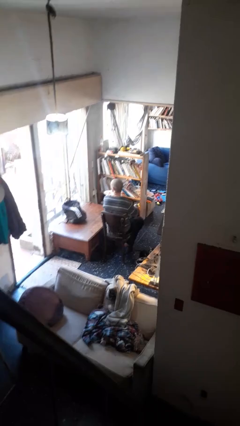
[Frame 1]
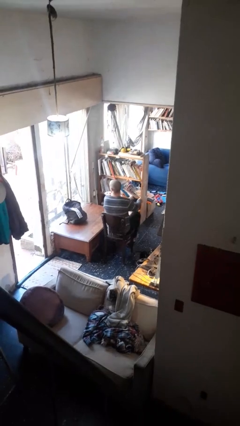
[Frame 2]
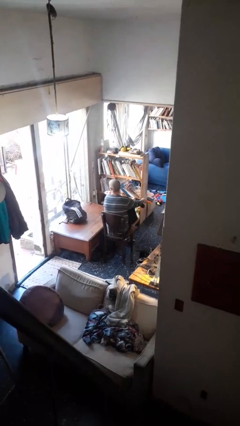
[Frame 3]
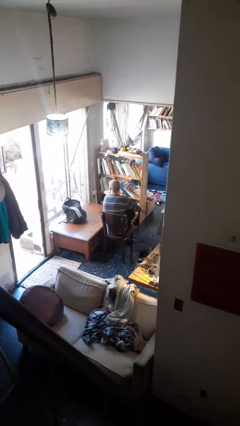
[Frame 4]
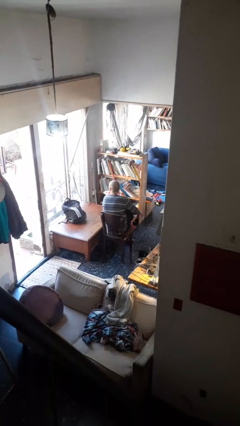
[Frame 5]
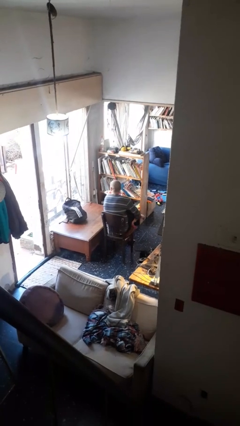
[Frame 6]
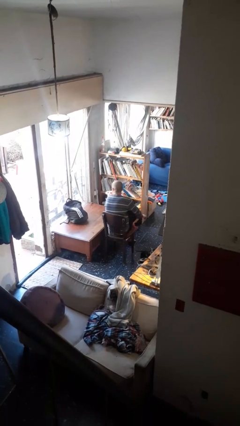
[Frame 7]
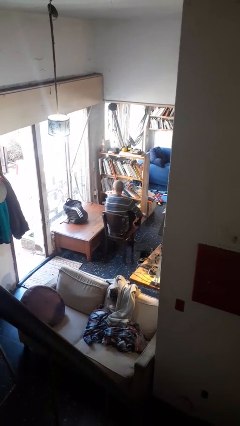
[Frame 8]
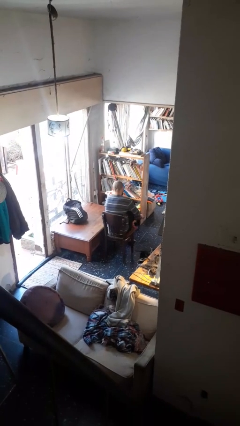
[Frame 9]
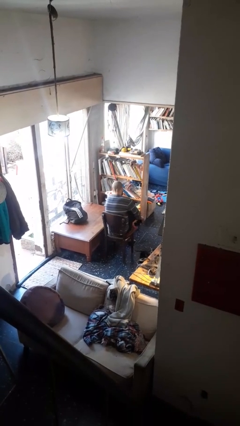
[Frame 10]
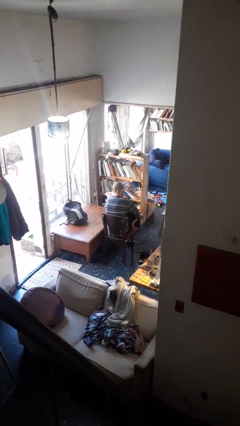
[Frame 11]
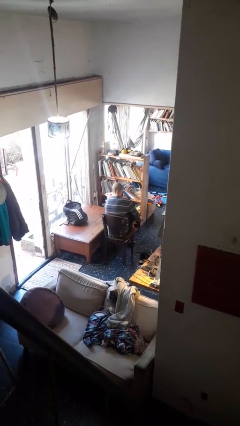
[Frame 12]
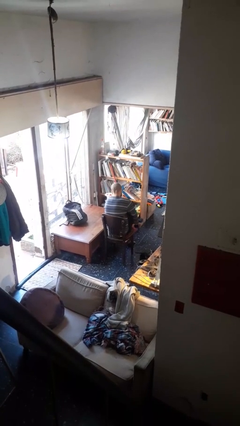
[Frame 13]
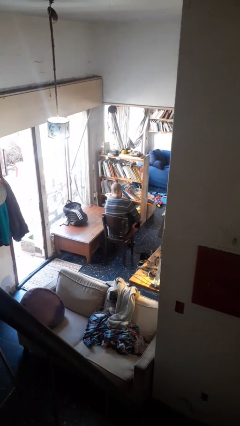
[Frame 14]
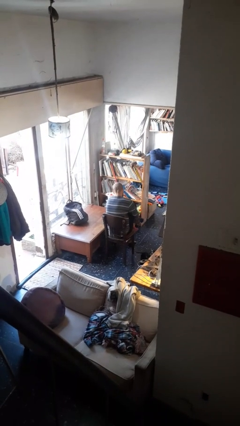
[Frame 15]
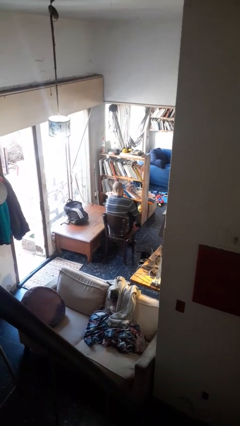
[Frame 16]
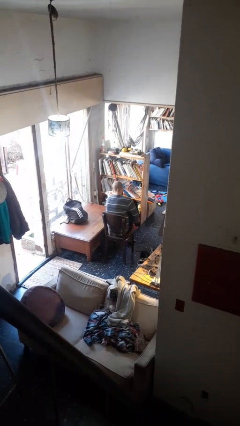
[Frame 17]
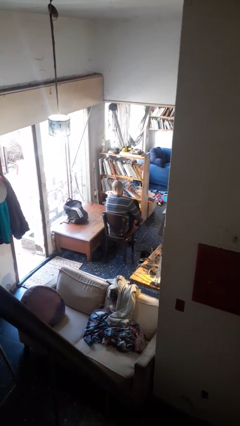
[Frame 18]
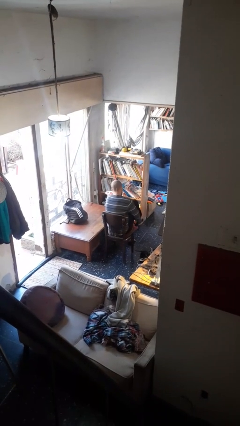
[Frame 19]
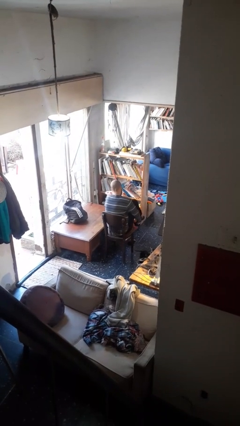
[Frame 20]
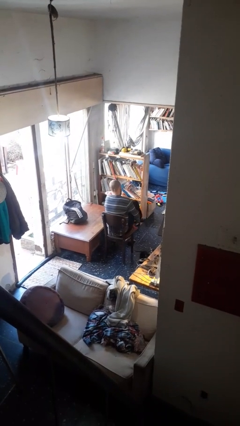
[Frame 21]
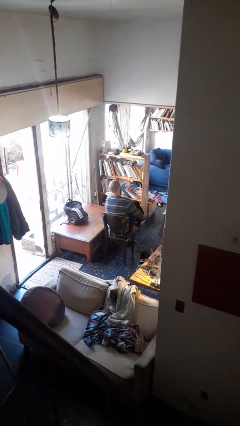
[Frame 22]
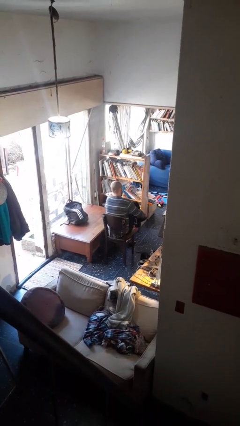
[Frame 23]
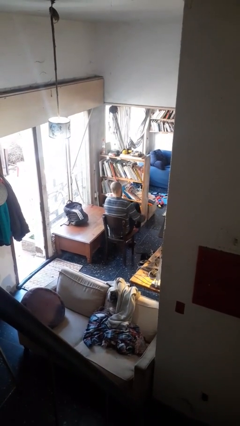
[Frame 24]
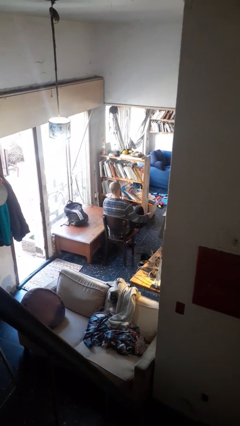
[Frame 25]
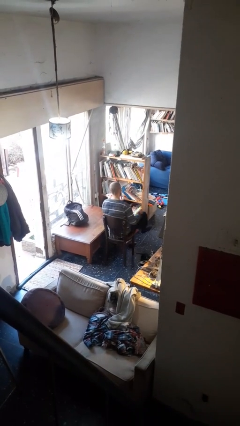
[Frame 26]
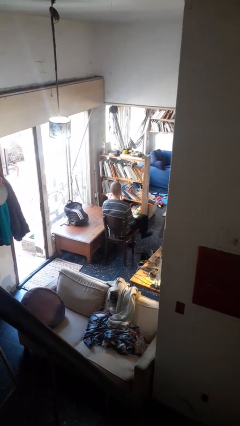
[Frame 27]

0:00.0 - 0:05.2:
person puts on socks

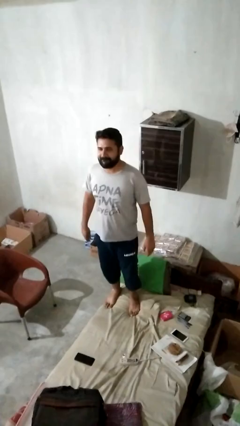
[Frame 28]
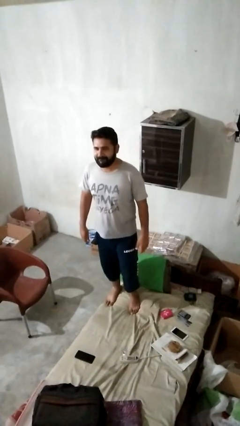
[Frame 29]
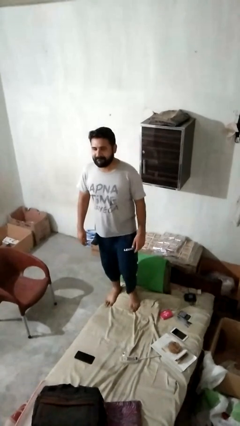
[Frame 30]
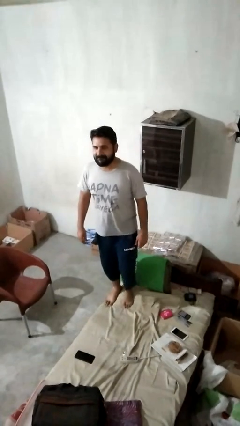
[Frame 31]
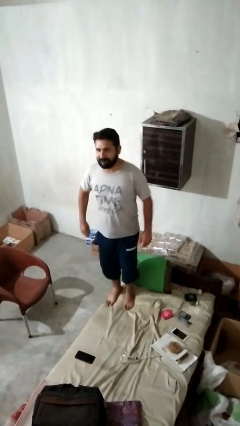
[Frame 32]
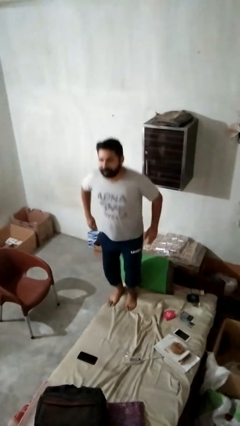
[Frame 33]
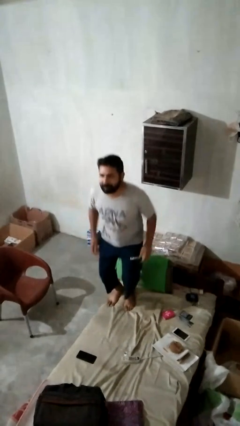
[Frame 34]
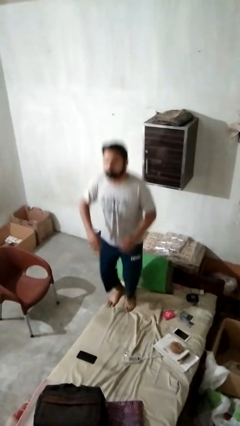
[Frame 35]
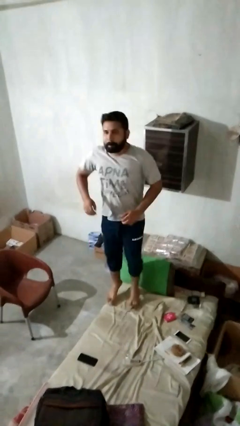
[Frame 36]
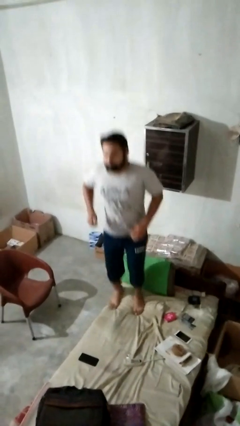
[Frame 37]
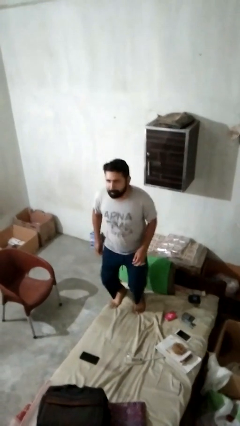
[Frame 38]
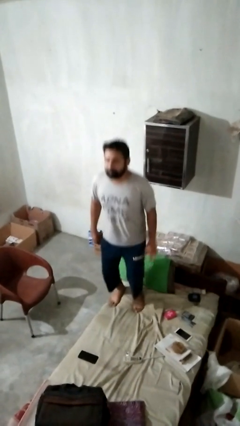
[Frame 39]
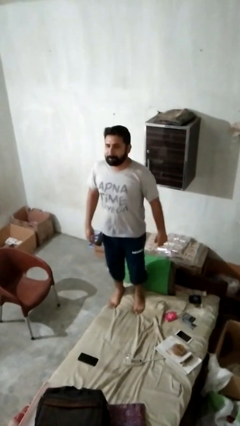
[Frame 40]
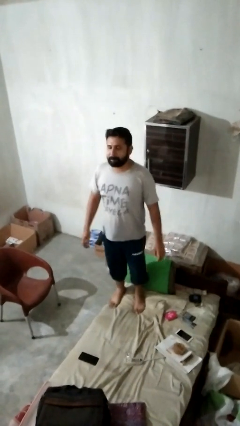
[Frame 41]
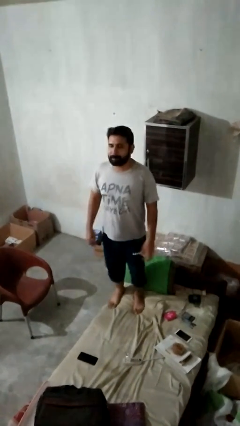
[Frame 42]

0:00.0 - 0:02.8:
person jumps on bed

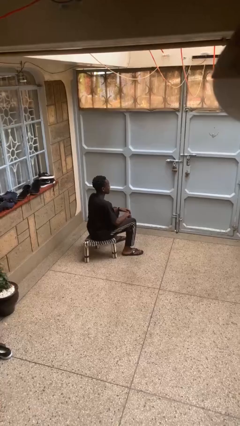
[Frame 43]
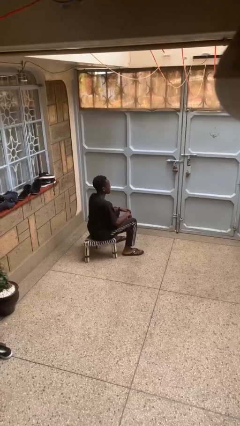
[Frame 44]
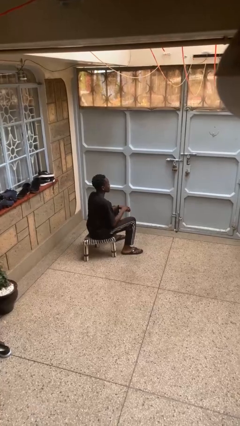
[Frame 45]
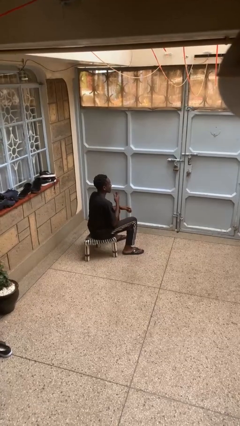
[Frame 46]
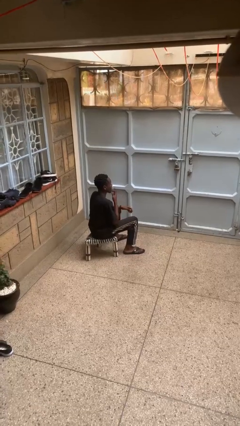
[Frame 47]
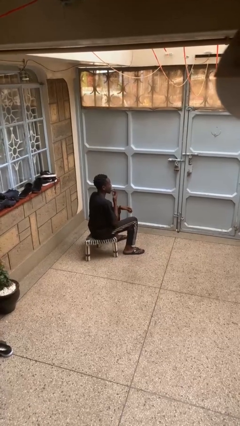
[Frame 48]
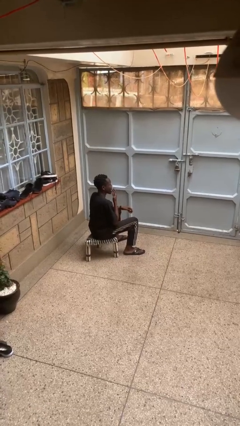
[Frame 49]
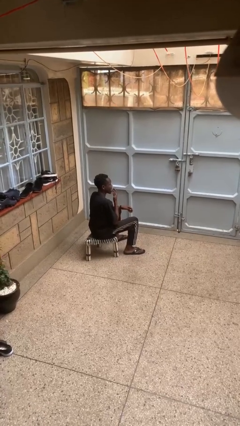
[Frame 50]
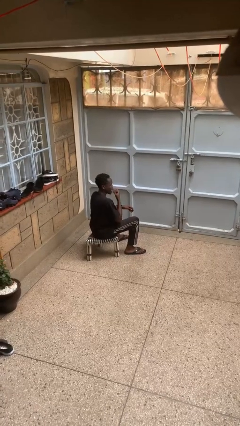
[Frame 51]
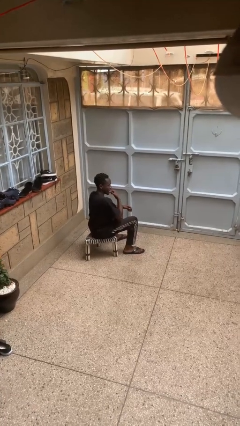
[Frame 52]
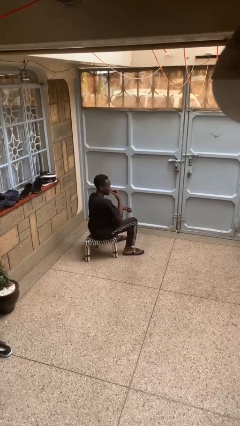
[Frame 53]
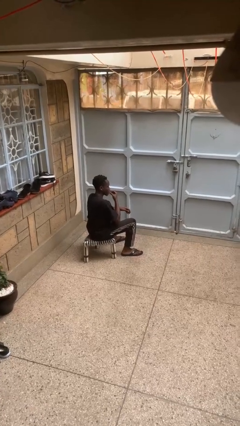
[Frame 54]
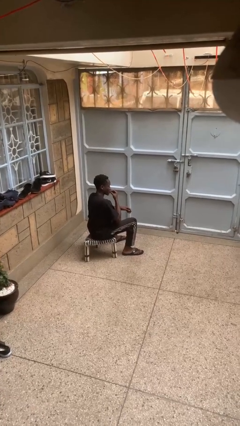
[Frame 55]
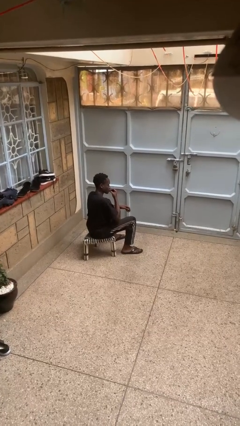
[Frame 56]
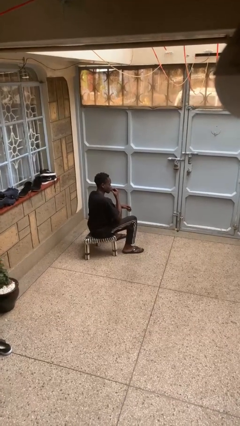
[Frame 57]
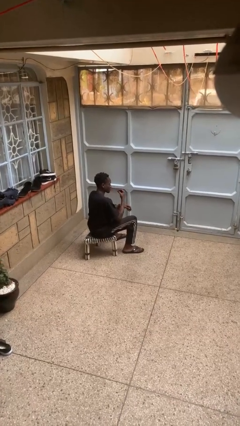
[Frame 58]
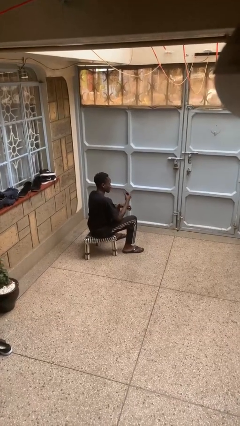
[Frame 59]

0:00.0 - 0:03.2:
person licks fingers

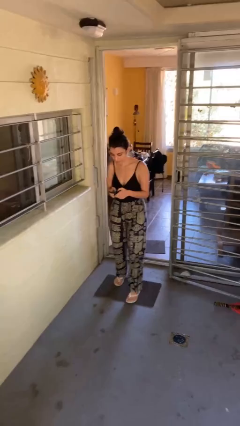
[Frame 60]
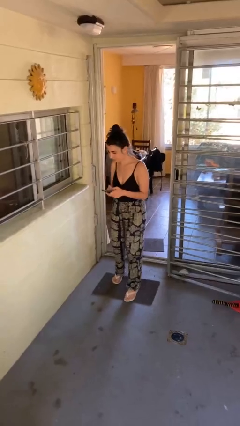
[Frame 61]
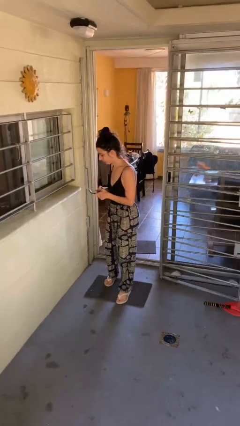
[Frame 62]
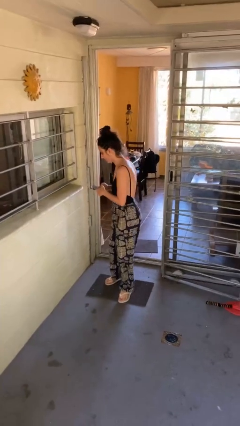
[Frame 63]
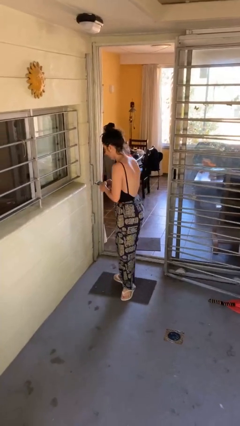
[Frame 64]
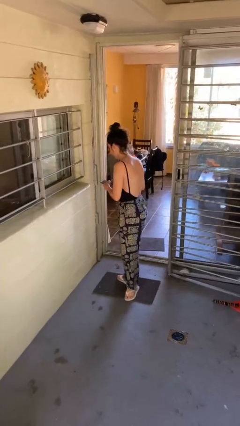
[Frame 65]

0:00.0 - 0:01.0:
person enters scene through structure

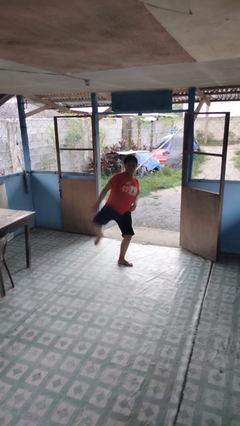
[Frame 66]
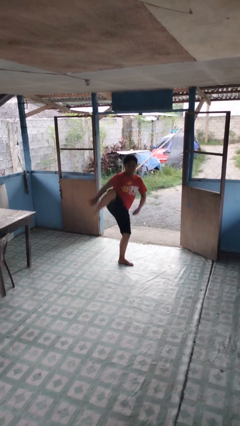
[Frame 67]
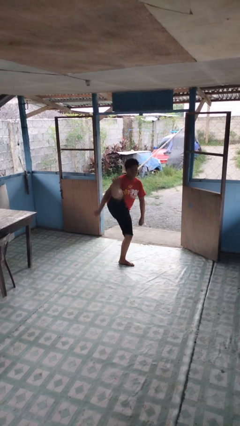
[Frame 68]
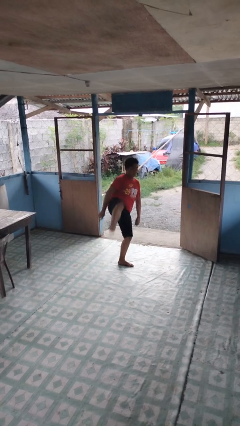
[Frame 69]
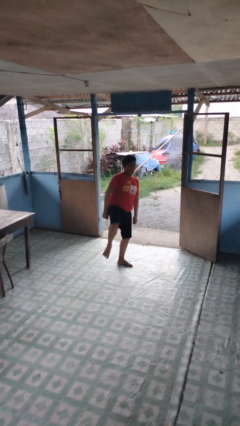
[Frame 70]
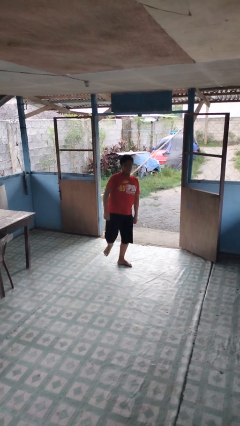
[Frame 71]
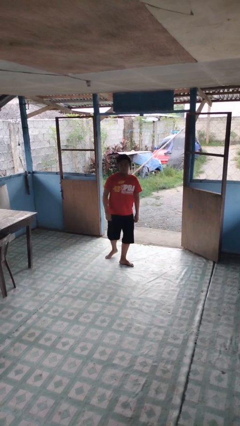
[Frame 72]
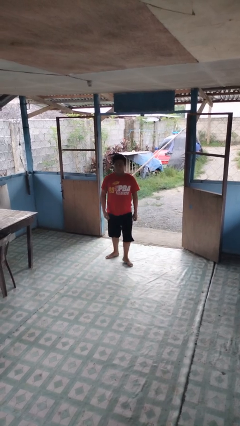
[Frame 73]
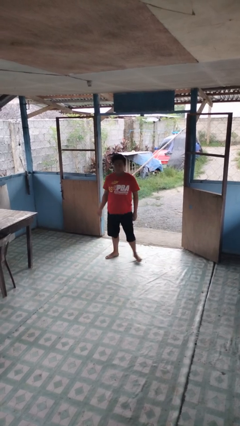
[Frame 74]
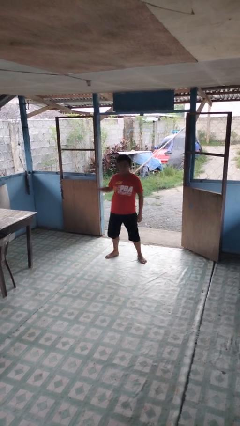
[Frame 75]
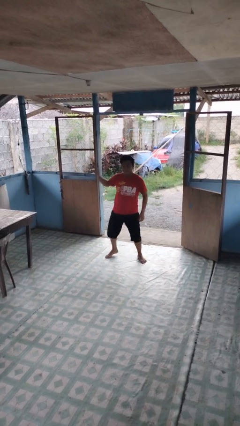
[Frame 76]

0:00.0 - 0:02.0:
person karate kicks

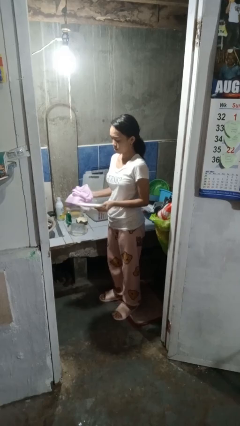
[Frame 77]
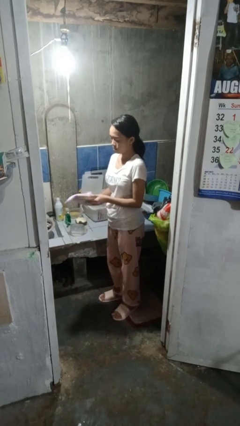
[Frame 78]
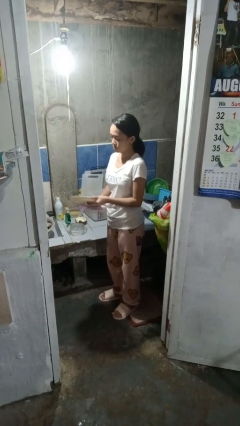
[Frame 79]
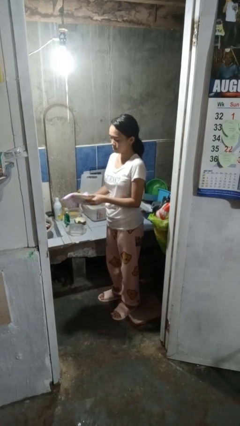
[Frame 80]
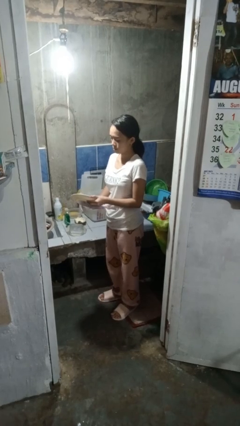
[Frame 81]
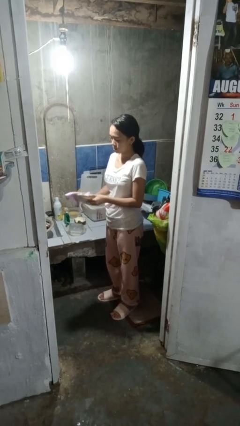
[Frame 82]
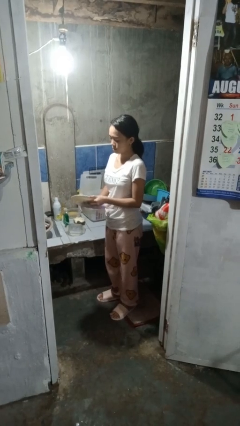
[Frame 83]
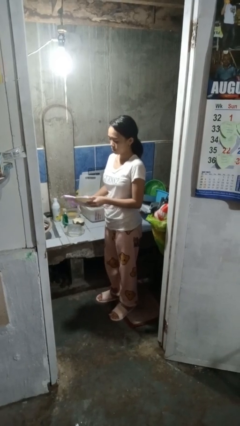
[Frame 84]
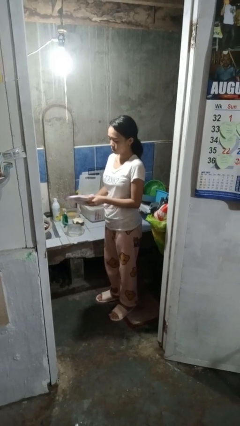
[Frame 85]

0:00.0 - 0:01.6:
person dries dish

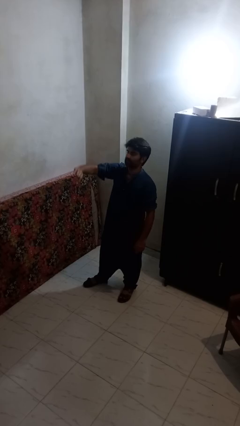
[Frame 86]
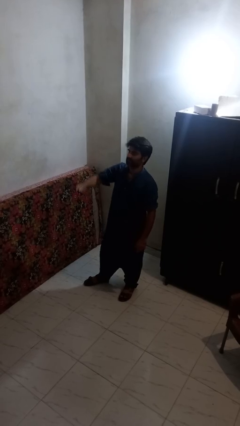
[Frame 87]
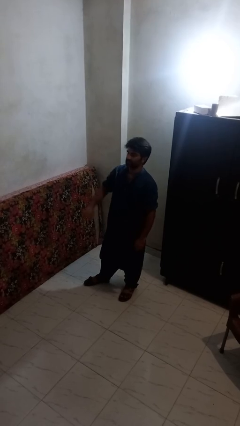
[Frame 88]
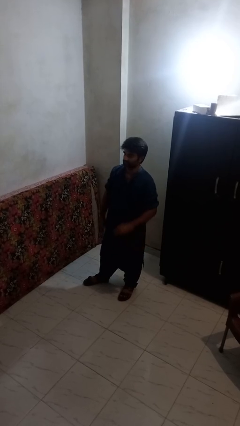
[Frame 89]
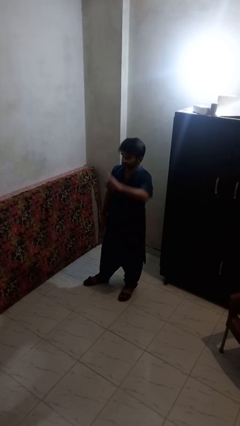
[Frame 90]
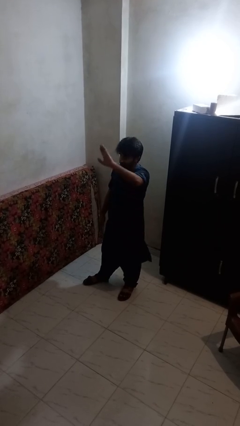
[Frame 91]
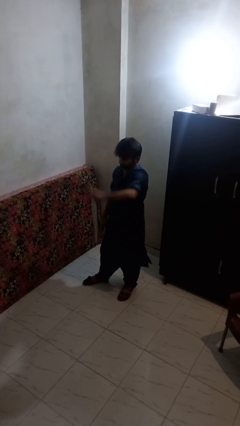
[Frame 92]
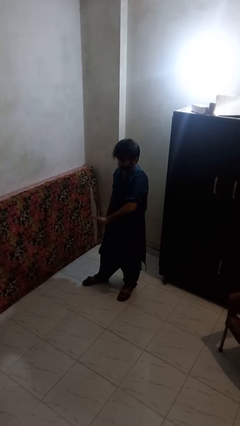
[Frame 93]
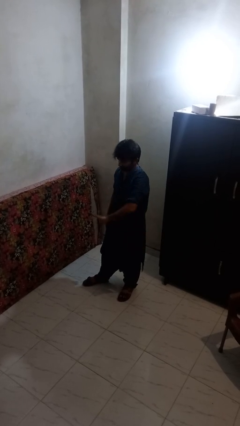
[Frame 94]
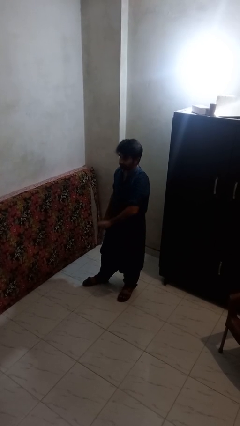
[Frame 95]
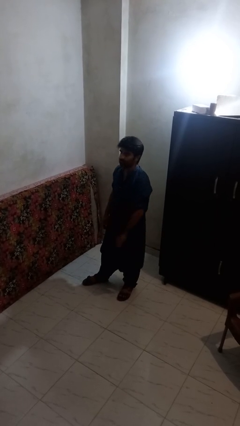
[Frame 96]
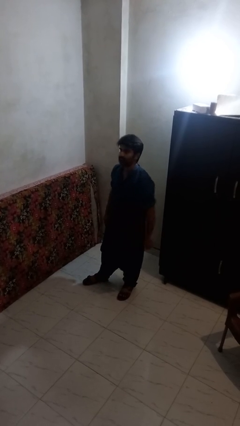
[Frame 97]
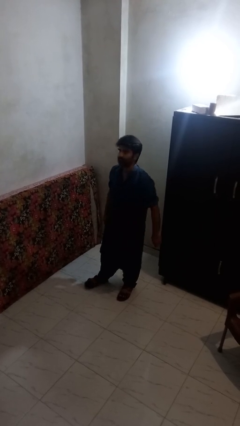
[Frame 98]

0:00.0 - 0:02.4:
person gestures swipe down
